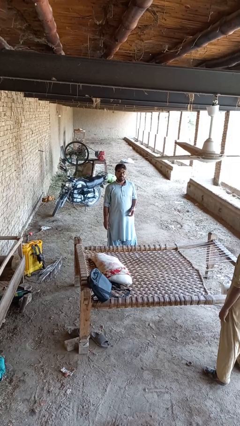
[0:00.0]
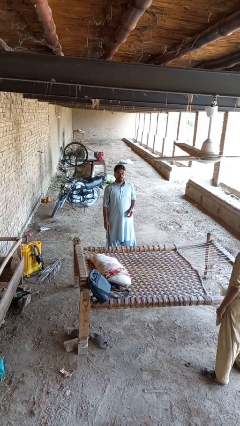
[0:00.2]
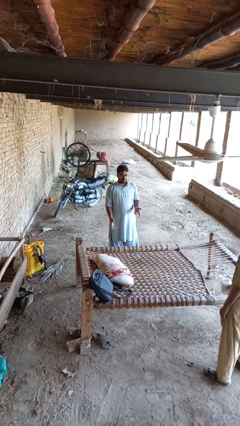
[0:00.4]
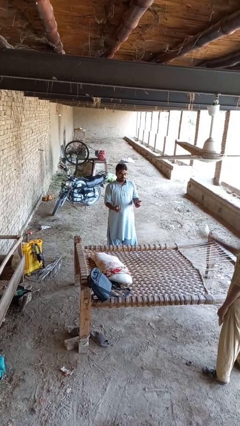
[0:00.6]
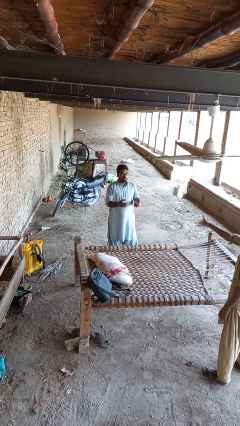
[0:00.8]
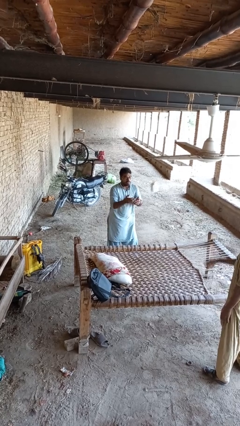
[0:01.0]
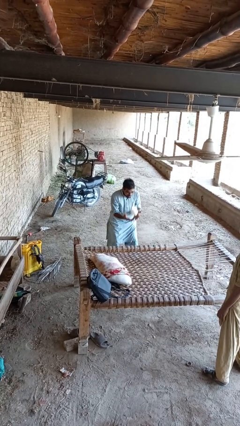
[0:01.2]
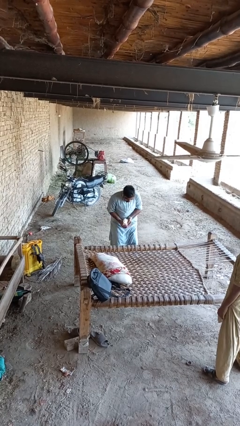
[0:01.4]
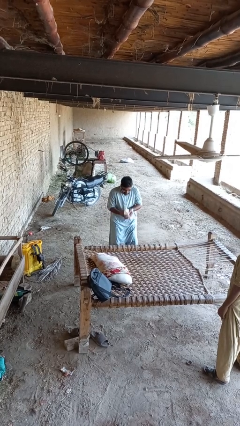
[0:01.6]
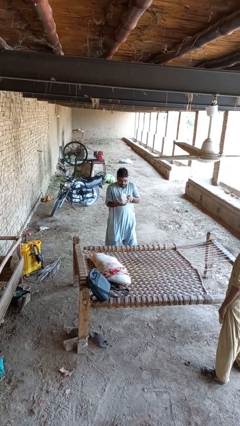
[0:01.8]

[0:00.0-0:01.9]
person catches object from person

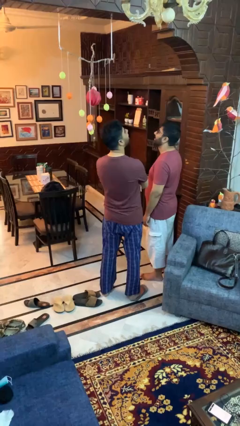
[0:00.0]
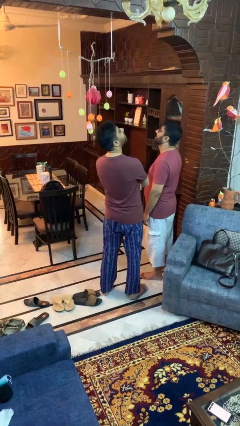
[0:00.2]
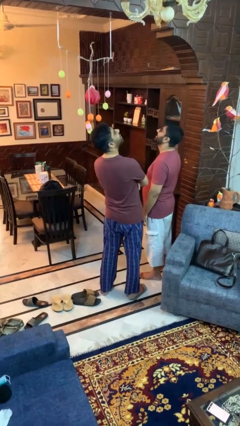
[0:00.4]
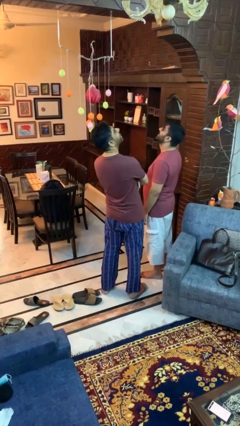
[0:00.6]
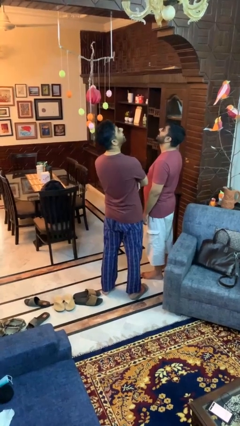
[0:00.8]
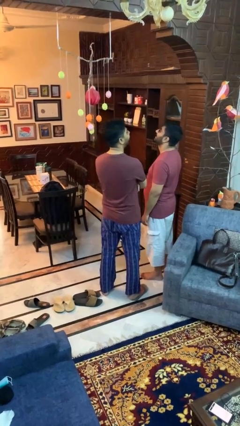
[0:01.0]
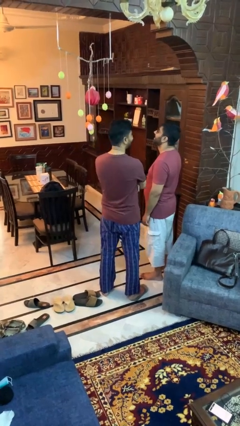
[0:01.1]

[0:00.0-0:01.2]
person laughs with person

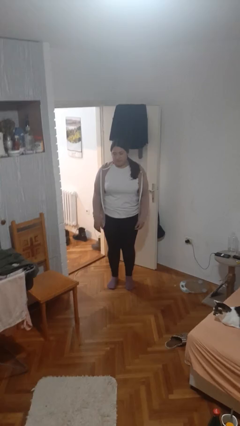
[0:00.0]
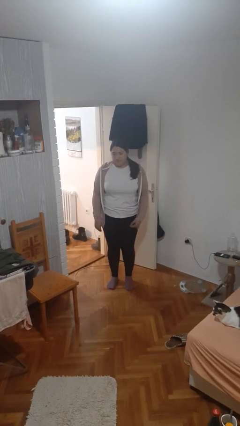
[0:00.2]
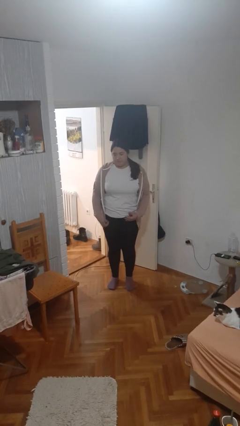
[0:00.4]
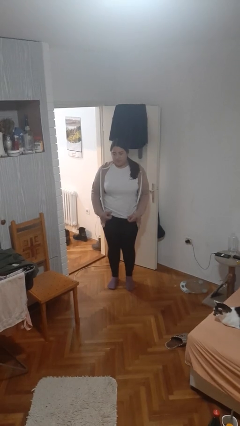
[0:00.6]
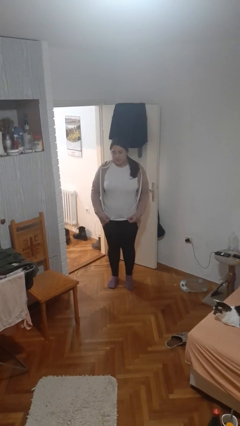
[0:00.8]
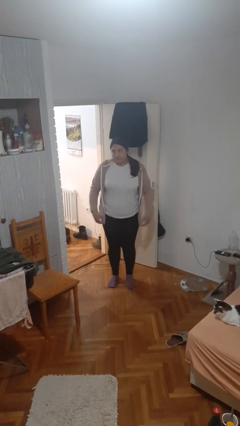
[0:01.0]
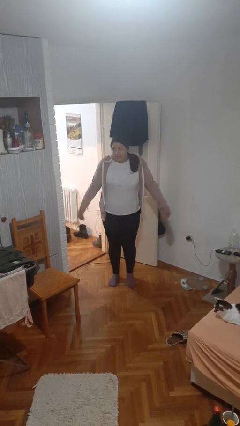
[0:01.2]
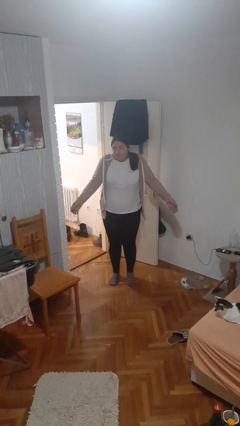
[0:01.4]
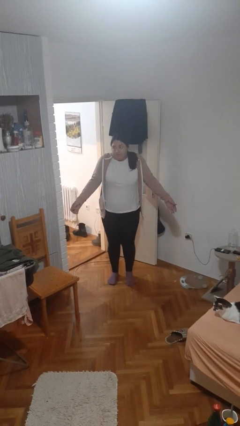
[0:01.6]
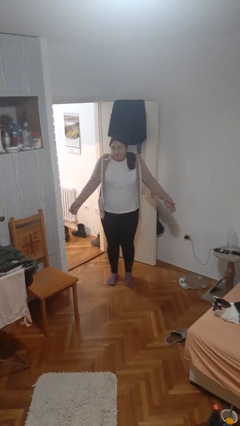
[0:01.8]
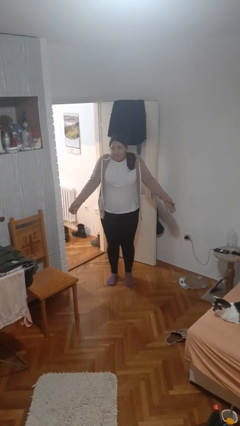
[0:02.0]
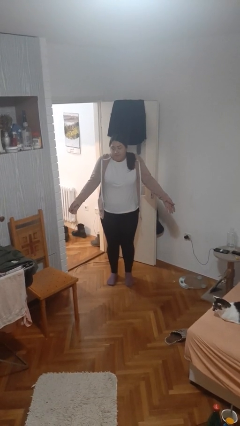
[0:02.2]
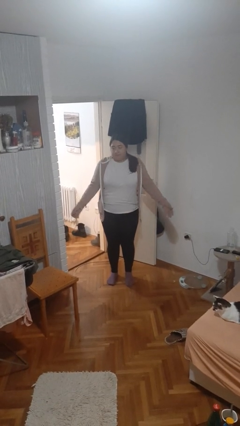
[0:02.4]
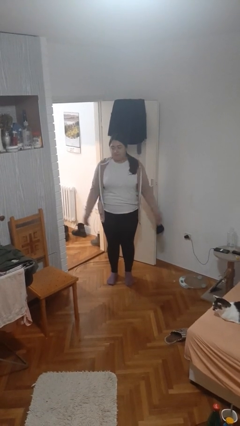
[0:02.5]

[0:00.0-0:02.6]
person shrugs

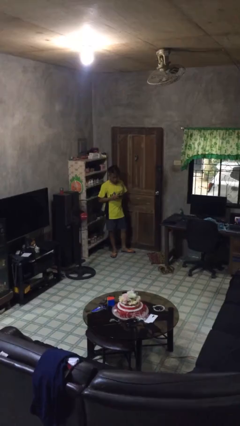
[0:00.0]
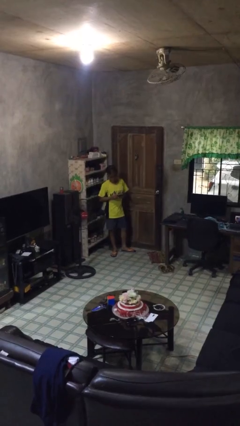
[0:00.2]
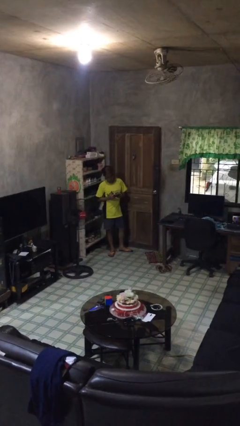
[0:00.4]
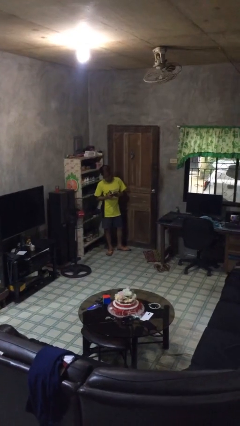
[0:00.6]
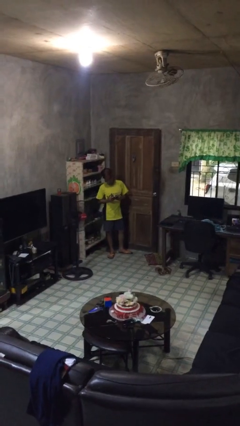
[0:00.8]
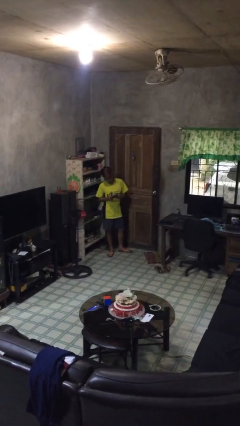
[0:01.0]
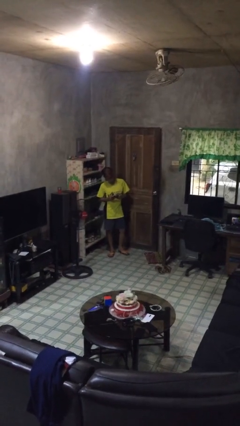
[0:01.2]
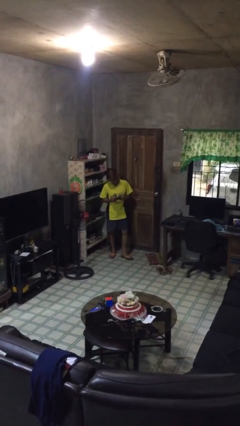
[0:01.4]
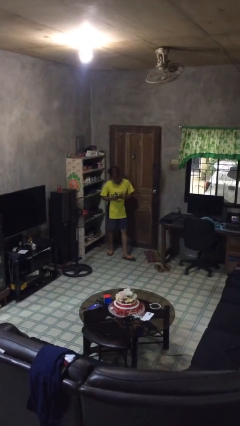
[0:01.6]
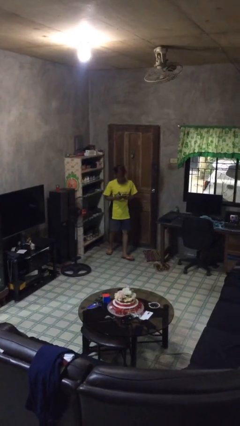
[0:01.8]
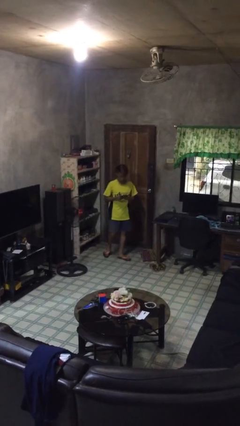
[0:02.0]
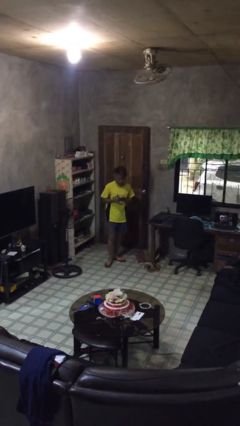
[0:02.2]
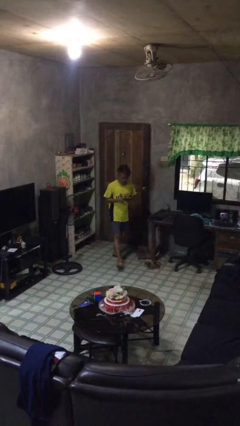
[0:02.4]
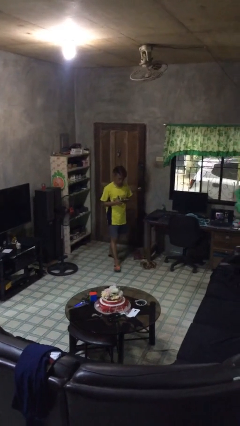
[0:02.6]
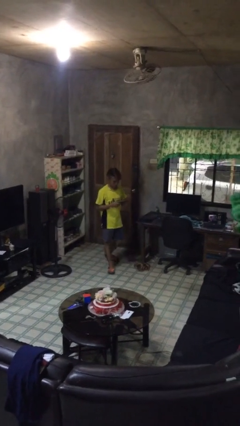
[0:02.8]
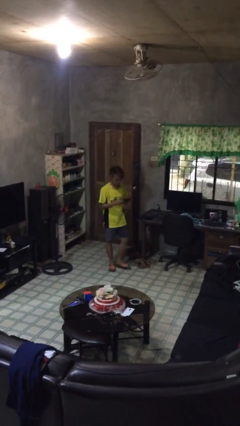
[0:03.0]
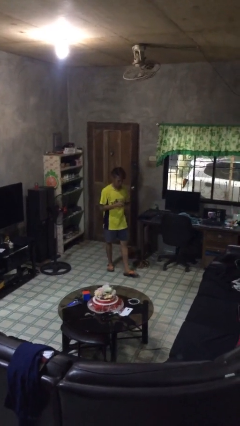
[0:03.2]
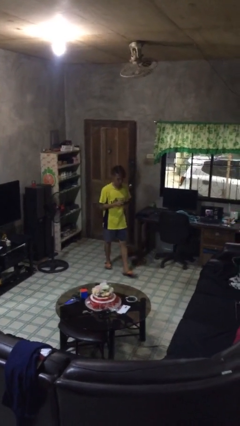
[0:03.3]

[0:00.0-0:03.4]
person texts on phone

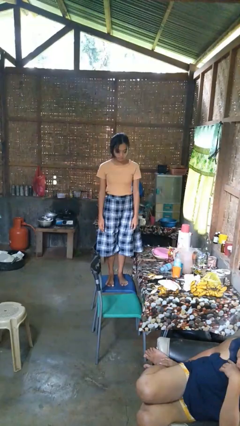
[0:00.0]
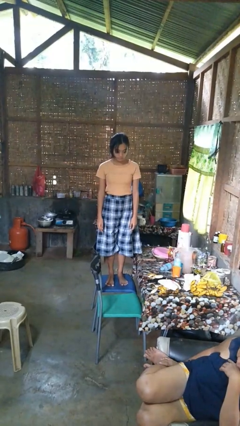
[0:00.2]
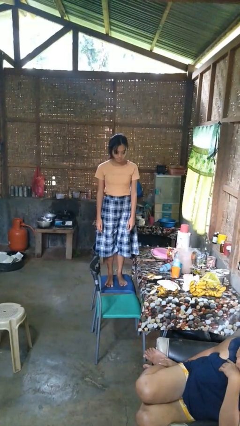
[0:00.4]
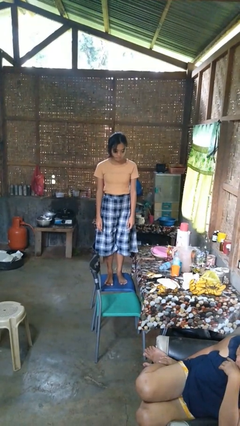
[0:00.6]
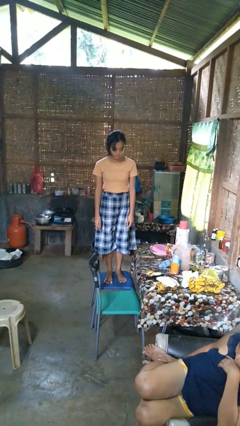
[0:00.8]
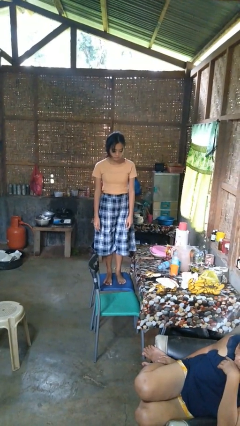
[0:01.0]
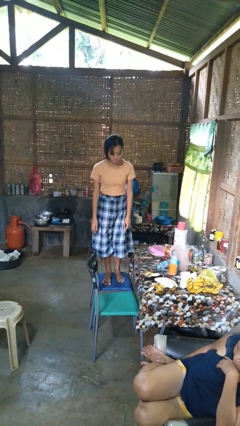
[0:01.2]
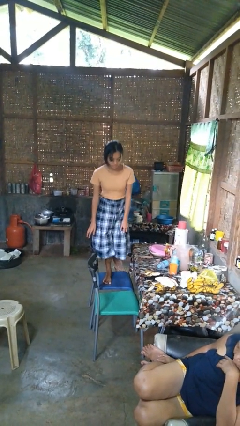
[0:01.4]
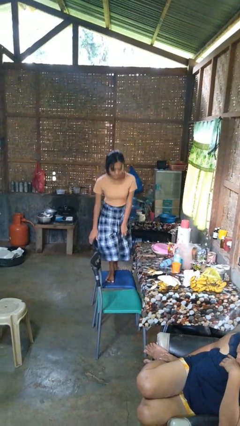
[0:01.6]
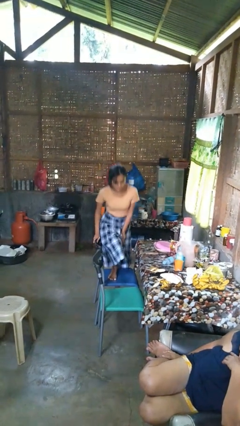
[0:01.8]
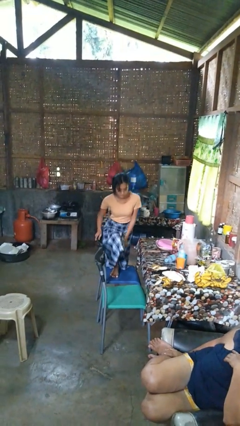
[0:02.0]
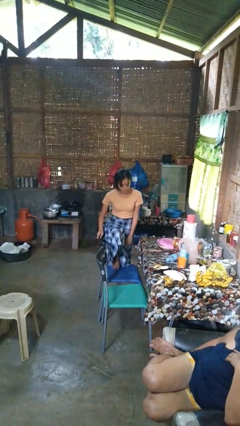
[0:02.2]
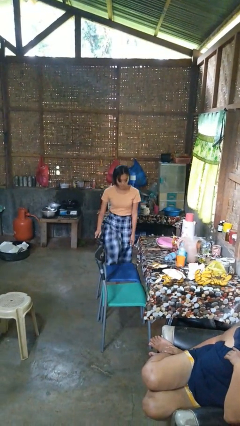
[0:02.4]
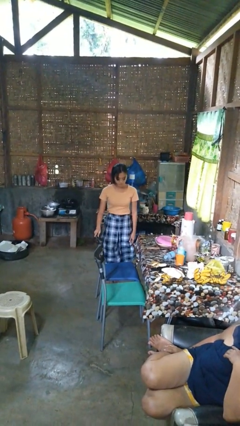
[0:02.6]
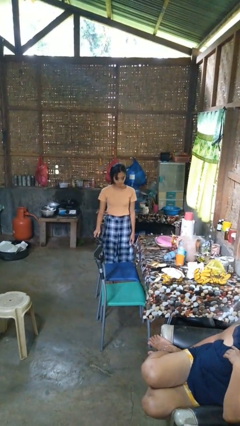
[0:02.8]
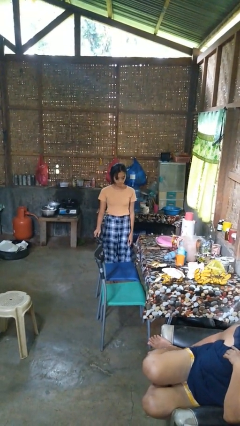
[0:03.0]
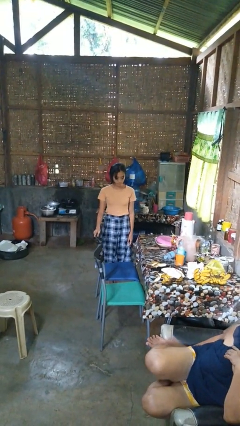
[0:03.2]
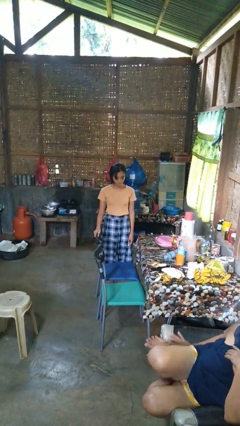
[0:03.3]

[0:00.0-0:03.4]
person climbs on couch

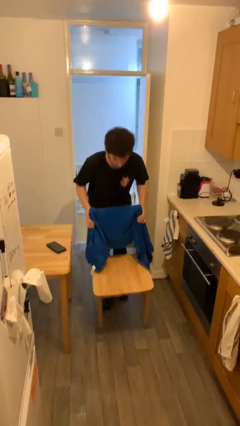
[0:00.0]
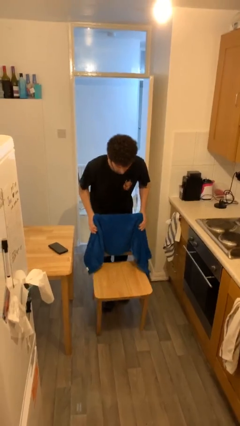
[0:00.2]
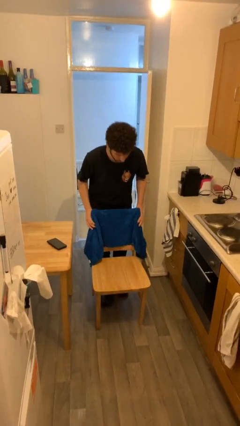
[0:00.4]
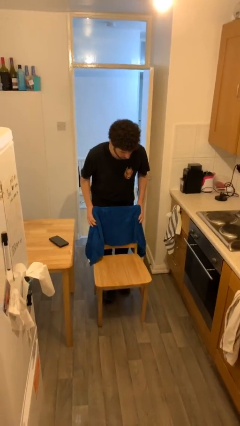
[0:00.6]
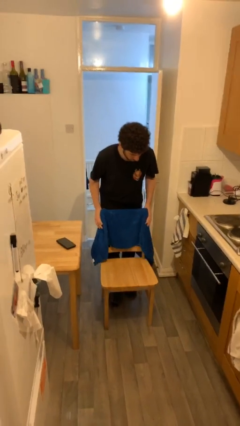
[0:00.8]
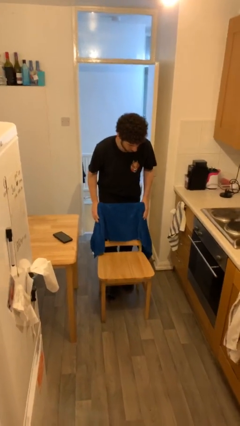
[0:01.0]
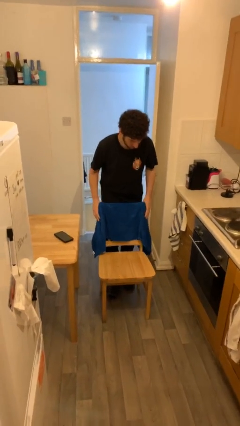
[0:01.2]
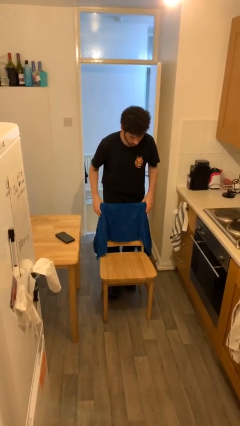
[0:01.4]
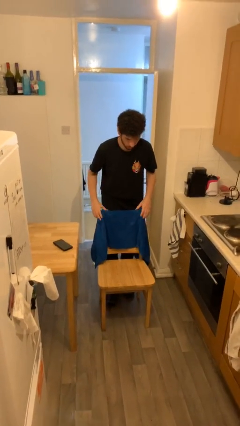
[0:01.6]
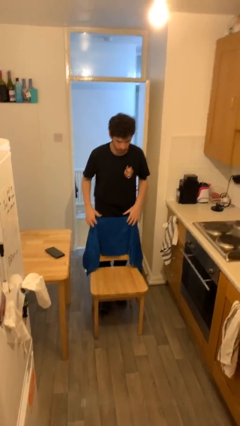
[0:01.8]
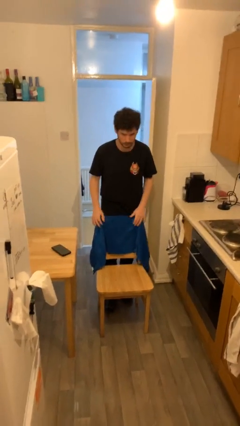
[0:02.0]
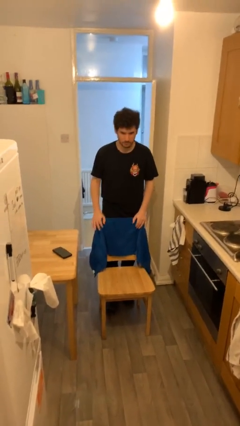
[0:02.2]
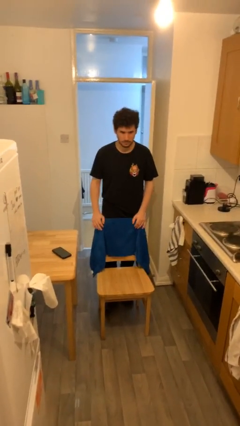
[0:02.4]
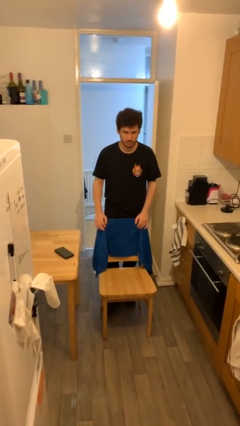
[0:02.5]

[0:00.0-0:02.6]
person puts down object on floor

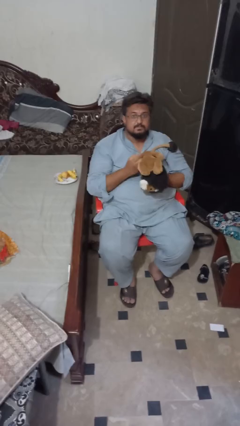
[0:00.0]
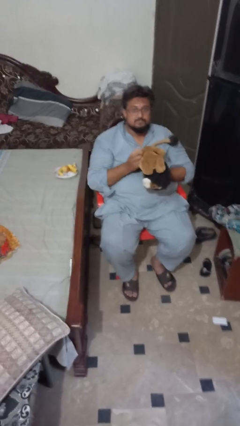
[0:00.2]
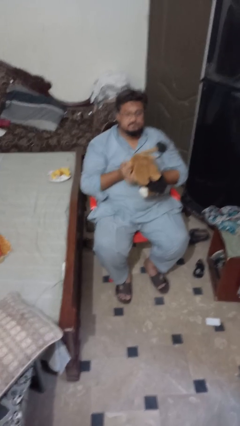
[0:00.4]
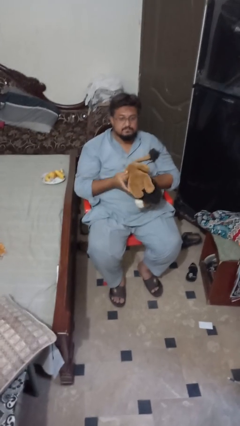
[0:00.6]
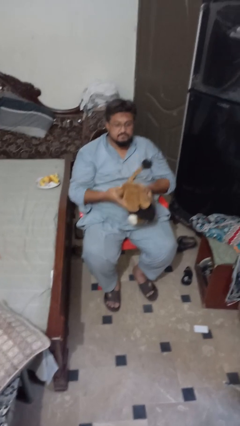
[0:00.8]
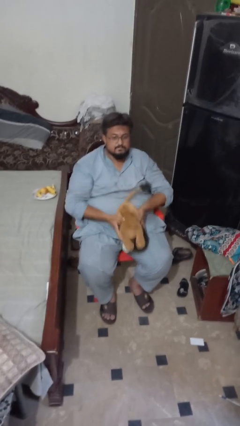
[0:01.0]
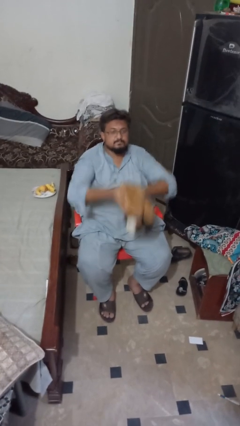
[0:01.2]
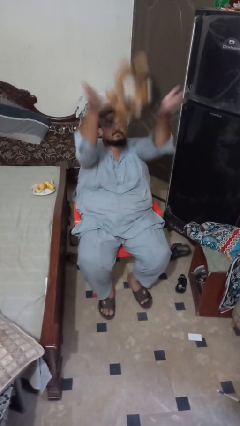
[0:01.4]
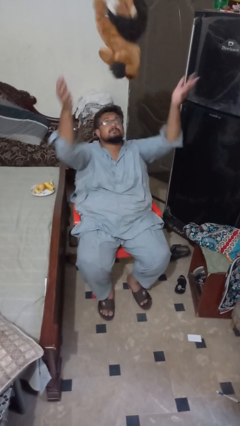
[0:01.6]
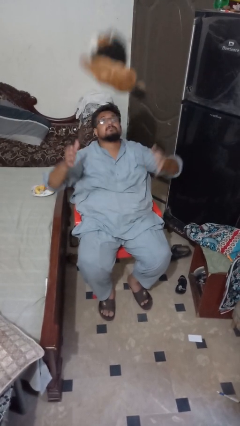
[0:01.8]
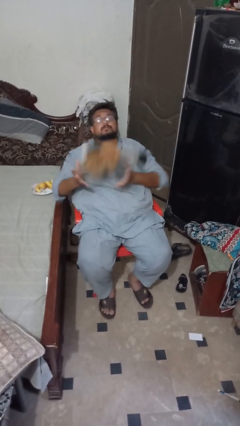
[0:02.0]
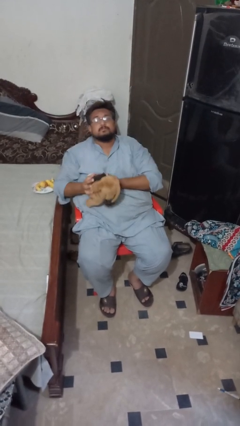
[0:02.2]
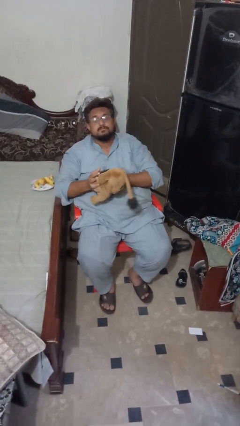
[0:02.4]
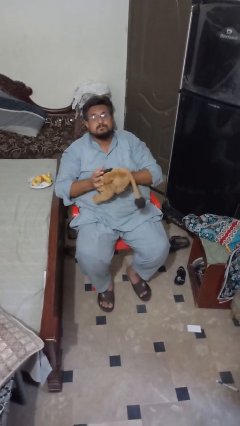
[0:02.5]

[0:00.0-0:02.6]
person drops object
